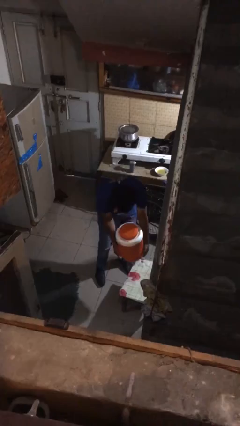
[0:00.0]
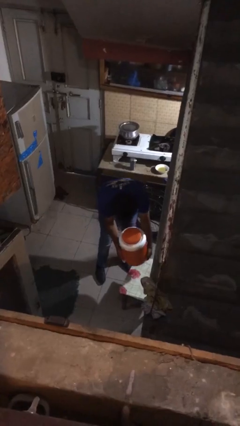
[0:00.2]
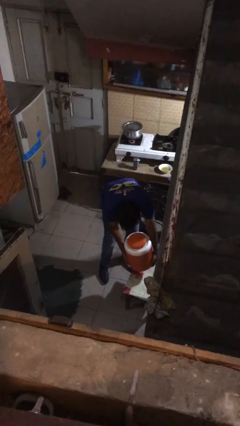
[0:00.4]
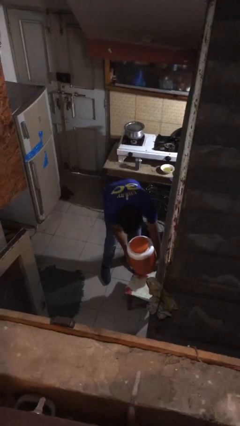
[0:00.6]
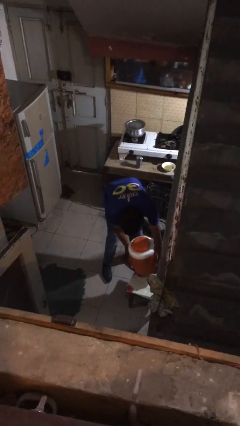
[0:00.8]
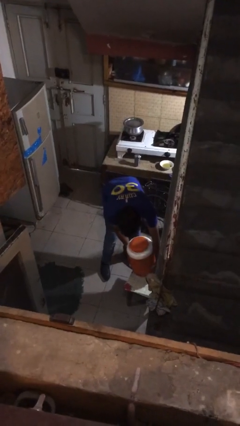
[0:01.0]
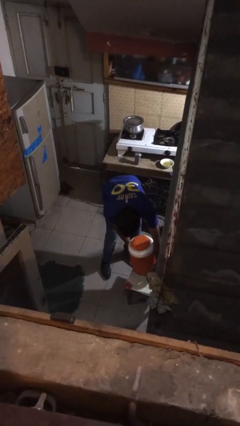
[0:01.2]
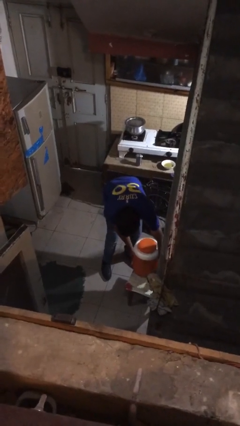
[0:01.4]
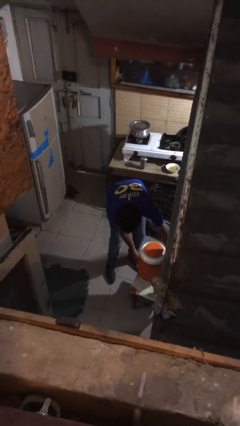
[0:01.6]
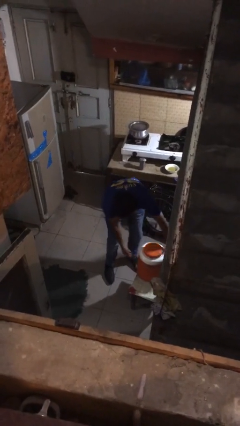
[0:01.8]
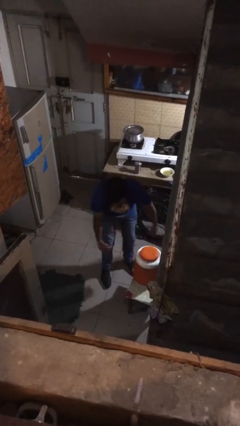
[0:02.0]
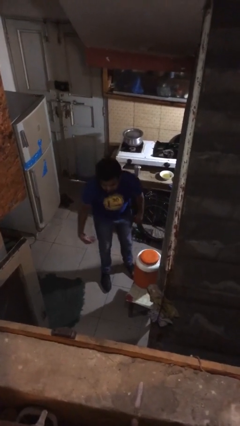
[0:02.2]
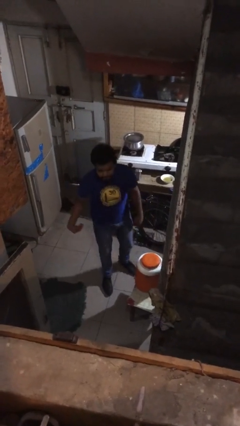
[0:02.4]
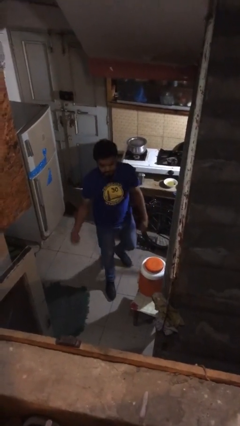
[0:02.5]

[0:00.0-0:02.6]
person puts down object on floor

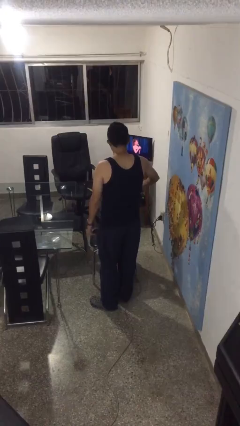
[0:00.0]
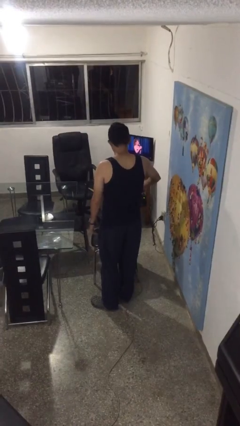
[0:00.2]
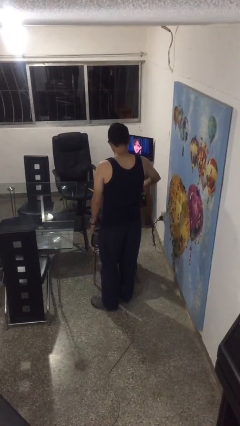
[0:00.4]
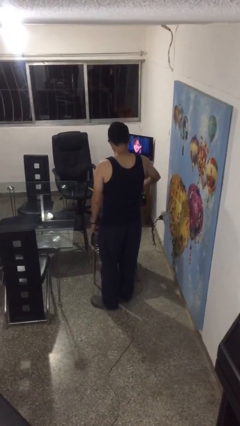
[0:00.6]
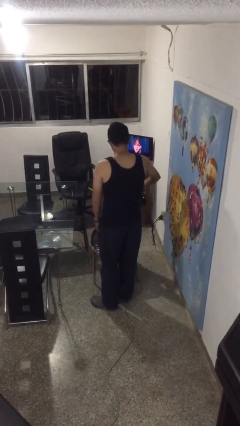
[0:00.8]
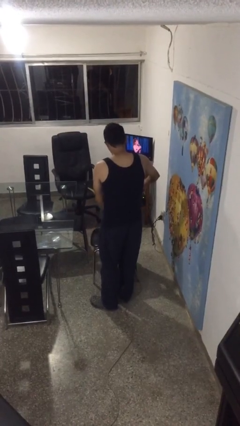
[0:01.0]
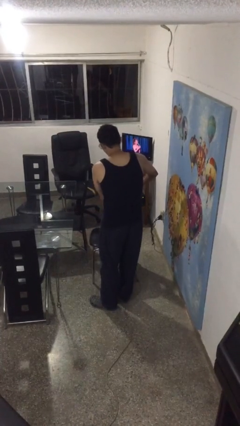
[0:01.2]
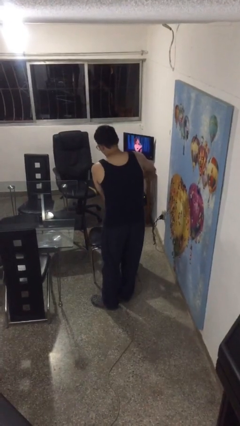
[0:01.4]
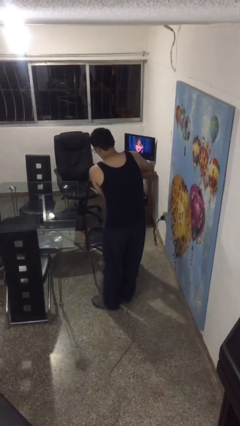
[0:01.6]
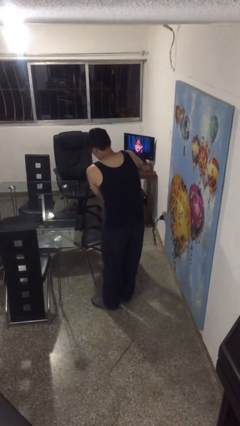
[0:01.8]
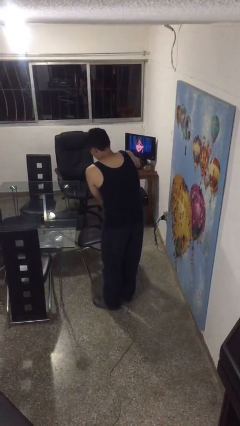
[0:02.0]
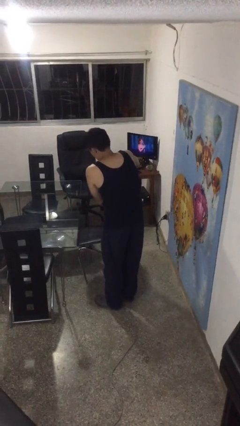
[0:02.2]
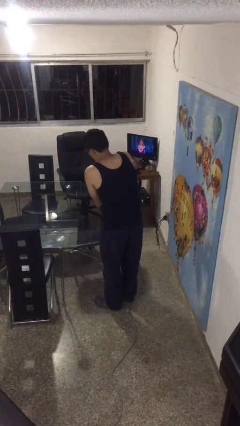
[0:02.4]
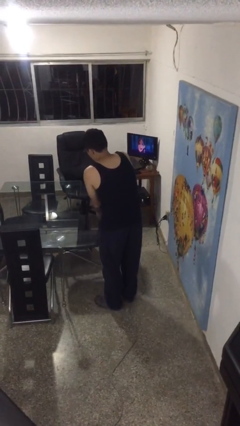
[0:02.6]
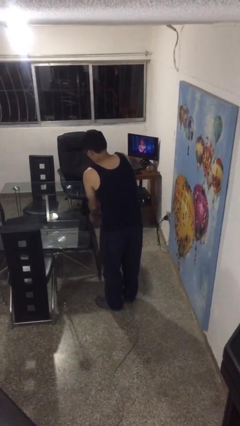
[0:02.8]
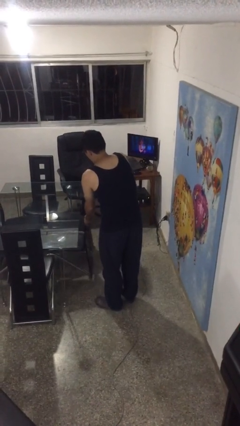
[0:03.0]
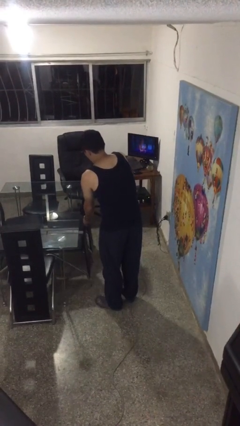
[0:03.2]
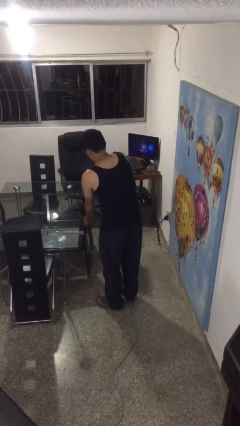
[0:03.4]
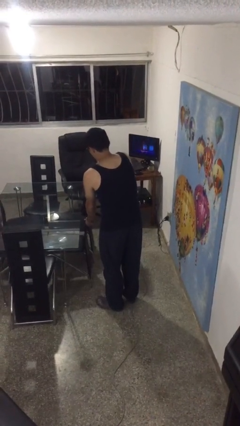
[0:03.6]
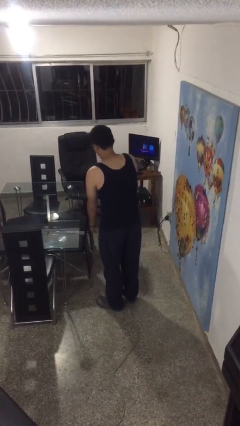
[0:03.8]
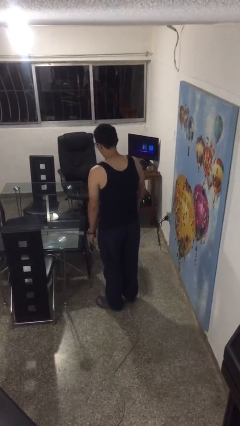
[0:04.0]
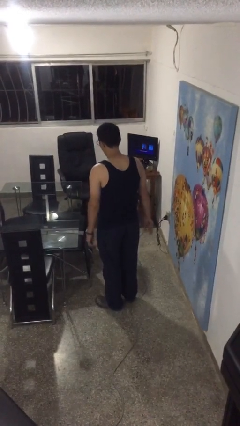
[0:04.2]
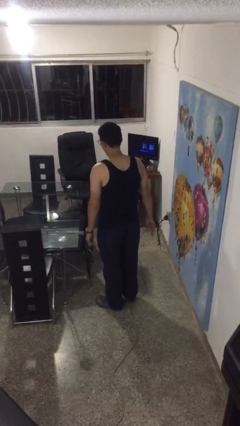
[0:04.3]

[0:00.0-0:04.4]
person pushes in chair

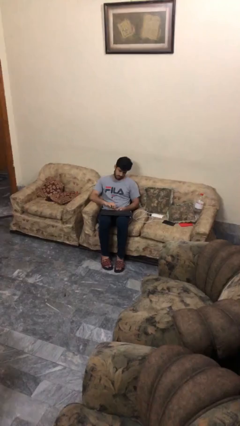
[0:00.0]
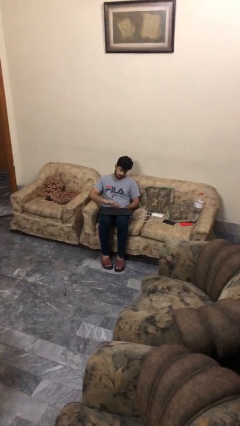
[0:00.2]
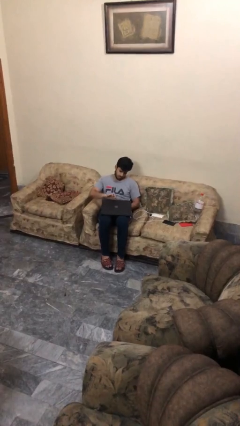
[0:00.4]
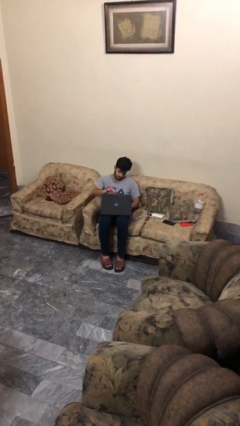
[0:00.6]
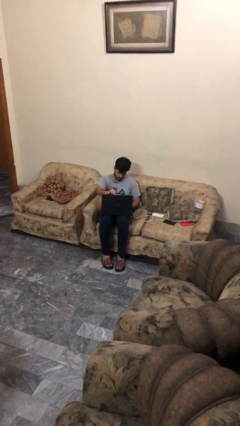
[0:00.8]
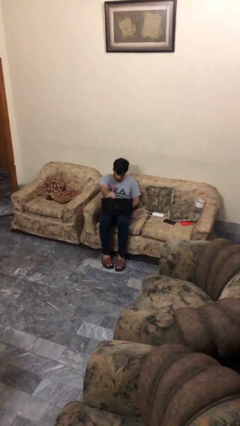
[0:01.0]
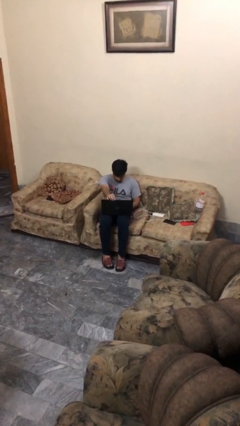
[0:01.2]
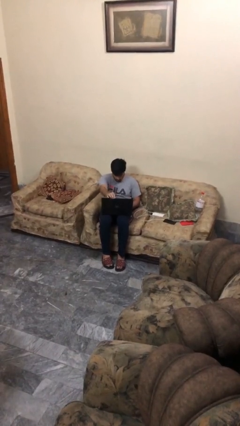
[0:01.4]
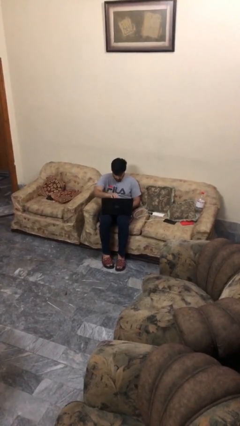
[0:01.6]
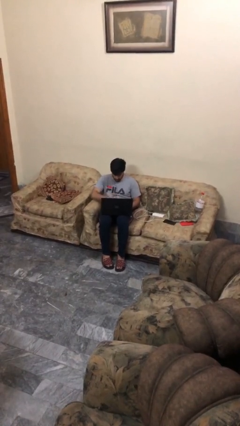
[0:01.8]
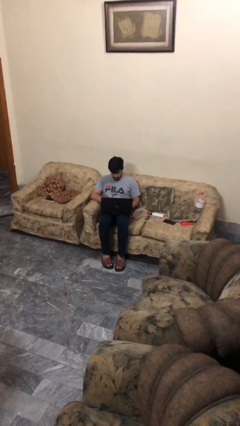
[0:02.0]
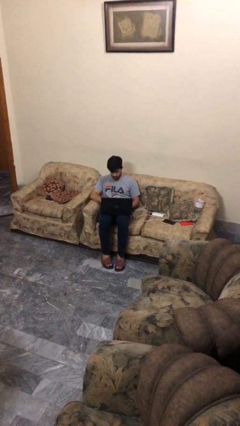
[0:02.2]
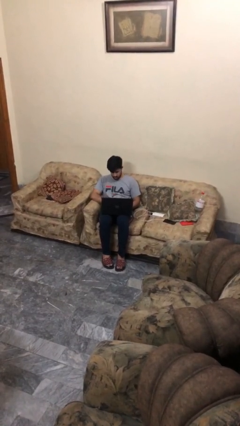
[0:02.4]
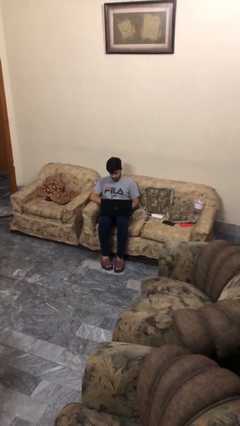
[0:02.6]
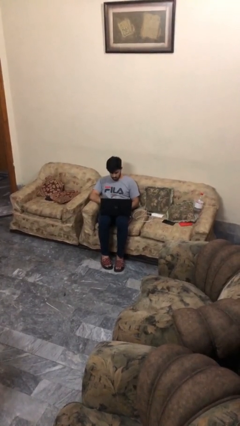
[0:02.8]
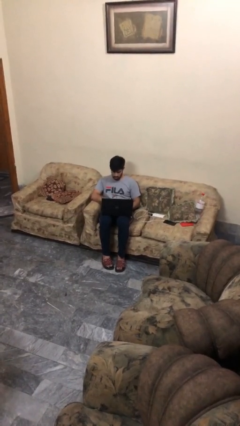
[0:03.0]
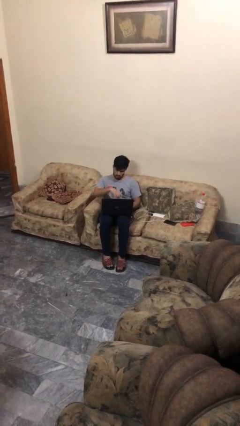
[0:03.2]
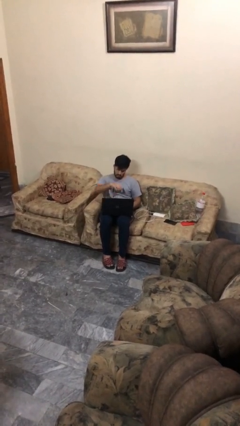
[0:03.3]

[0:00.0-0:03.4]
person opens laptop

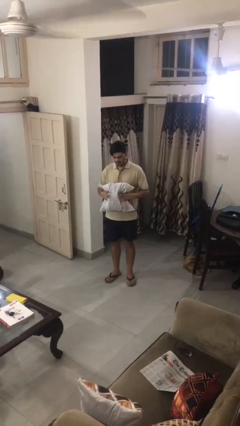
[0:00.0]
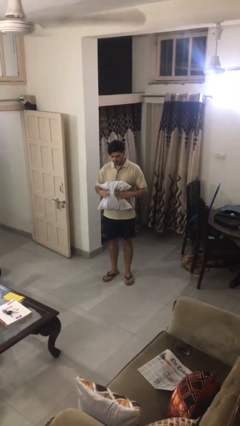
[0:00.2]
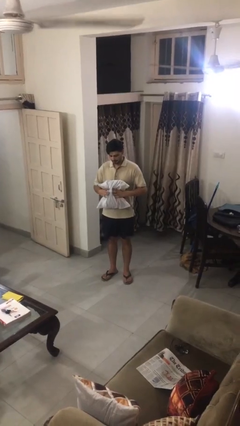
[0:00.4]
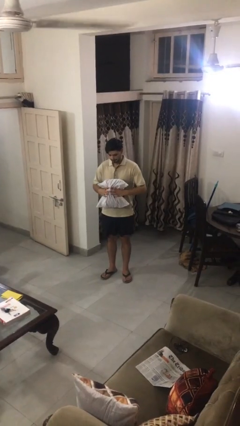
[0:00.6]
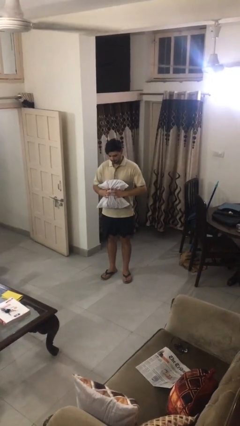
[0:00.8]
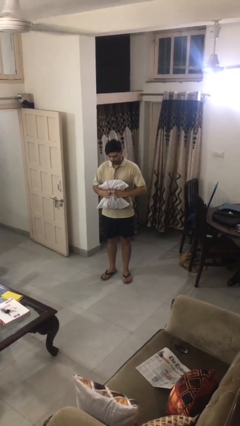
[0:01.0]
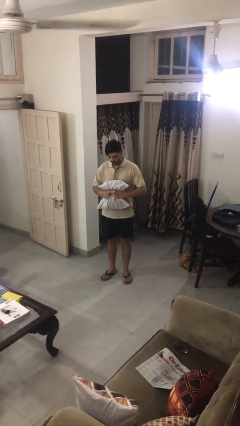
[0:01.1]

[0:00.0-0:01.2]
person squeezes object

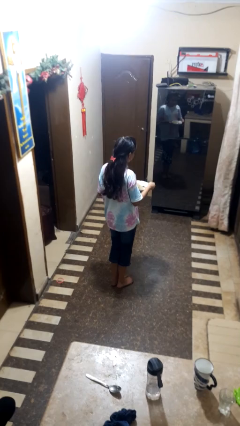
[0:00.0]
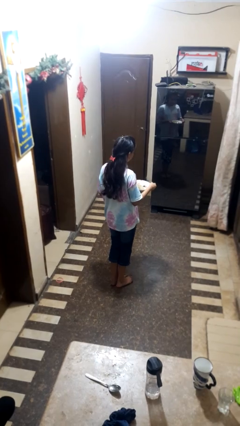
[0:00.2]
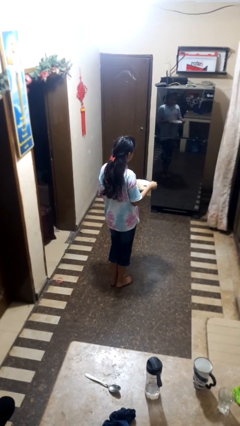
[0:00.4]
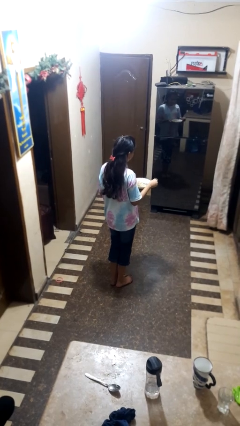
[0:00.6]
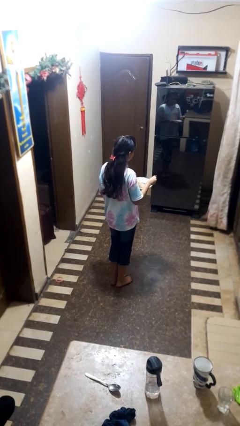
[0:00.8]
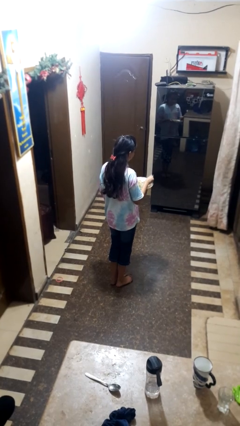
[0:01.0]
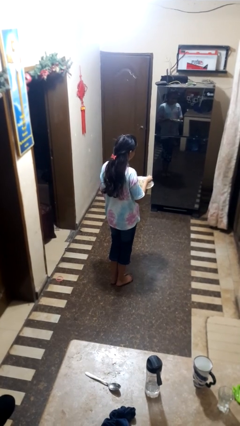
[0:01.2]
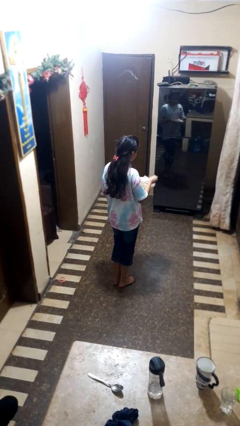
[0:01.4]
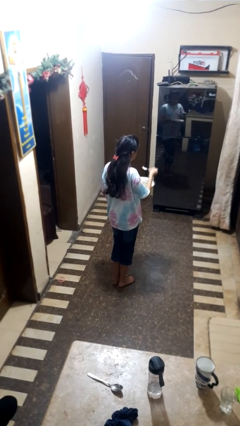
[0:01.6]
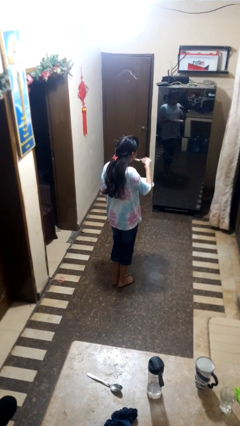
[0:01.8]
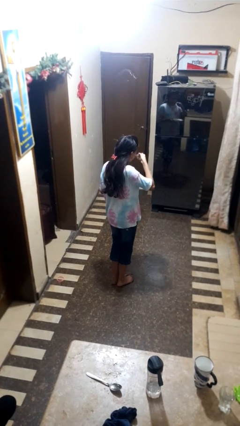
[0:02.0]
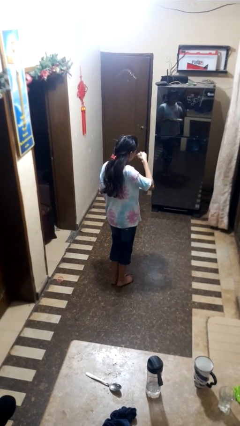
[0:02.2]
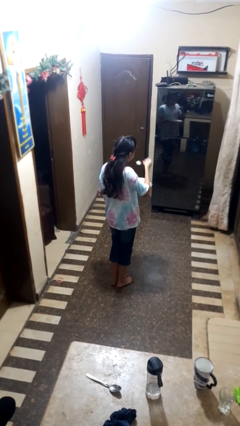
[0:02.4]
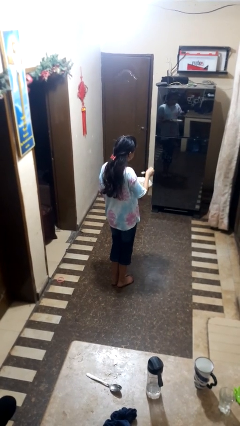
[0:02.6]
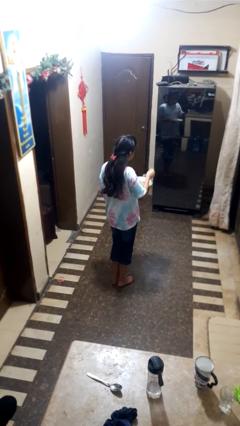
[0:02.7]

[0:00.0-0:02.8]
person eats with utensil

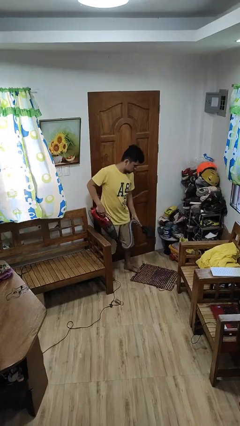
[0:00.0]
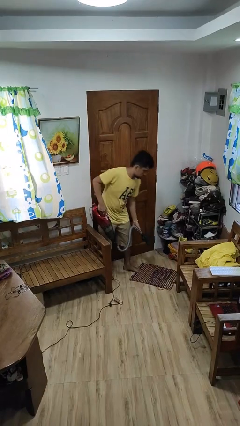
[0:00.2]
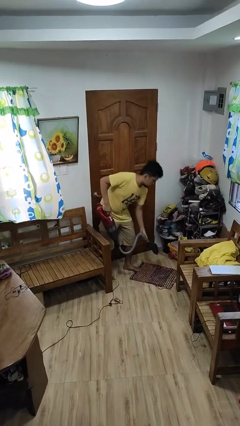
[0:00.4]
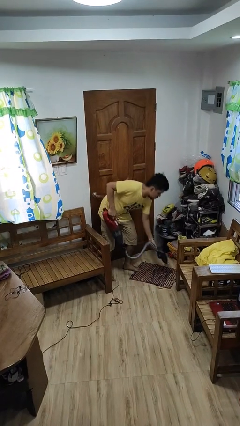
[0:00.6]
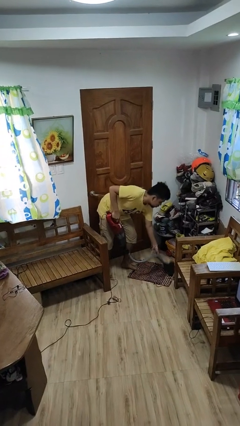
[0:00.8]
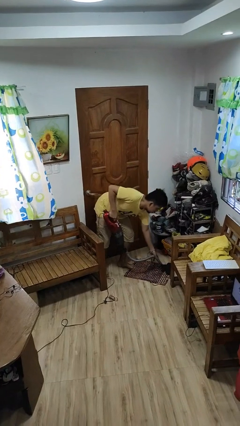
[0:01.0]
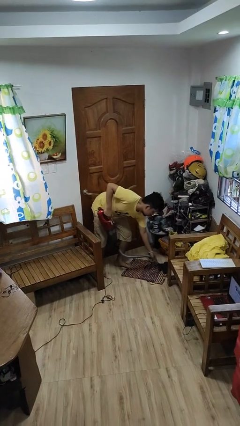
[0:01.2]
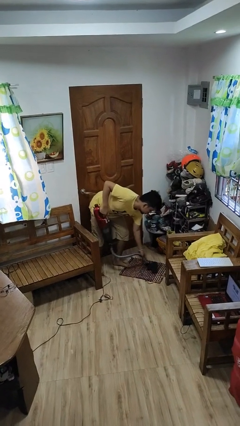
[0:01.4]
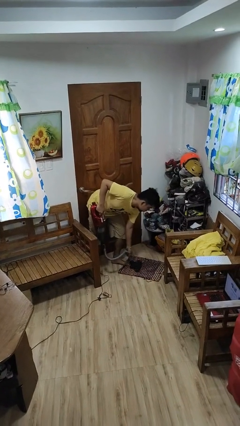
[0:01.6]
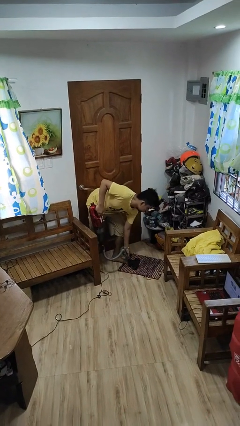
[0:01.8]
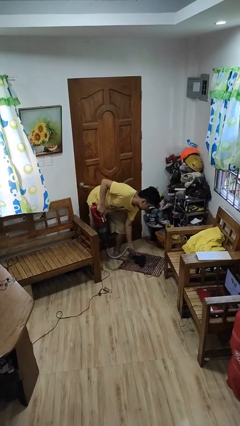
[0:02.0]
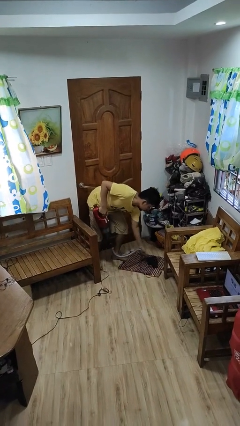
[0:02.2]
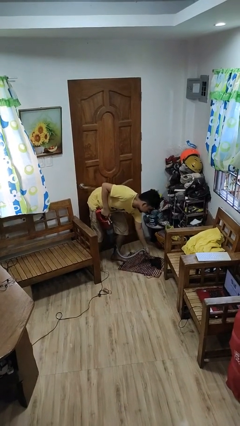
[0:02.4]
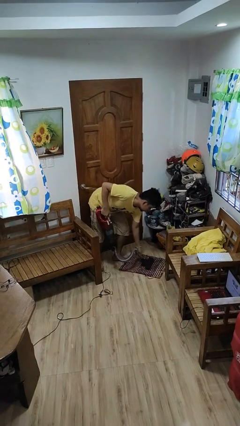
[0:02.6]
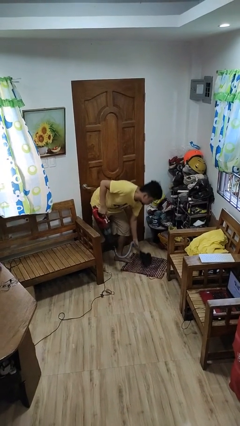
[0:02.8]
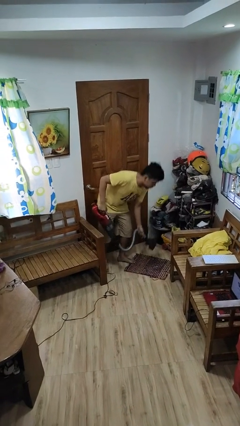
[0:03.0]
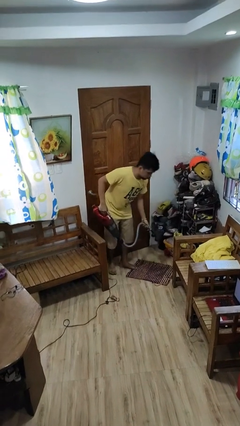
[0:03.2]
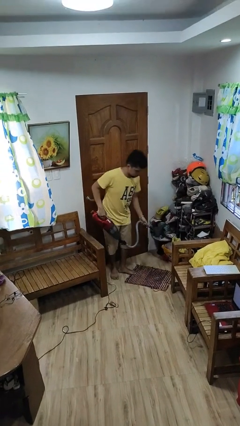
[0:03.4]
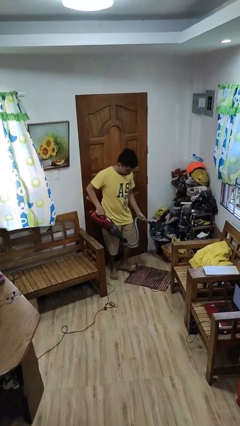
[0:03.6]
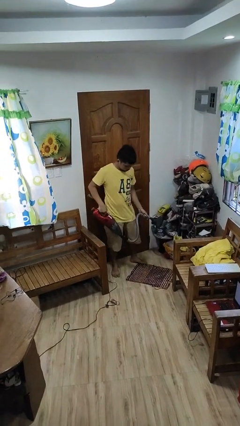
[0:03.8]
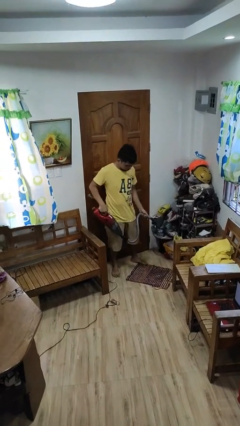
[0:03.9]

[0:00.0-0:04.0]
person vacuums carpet
